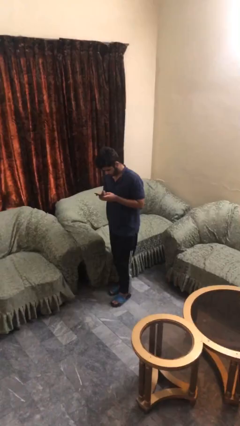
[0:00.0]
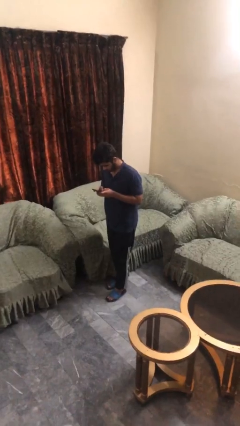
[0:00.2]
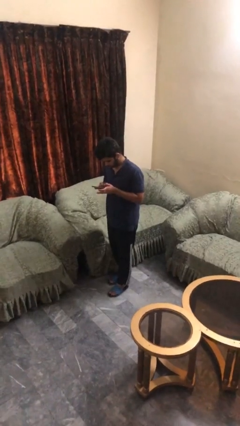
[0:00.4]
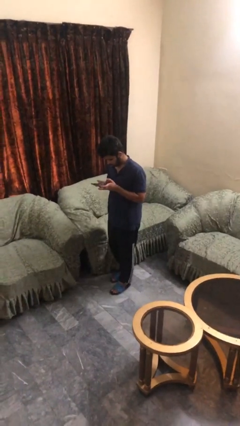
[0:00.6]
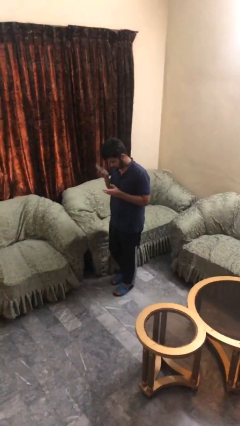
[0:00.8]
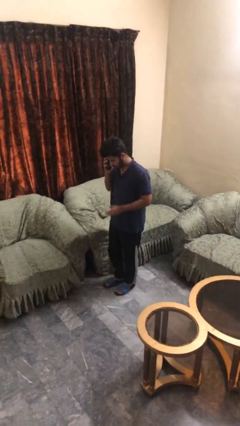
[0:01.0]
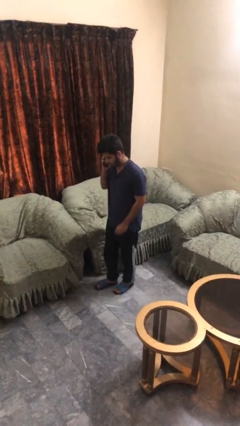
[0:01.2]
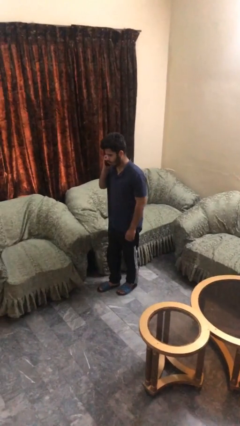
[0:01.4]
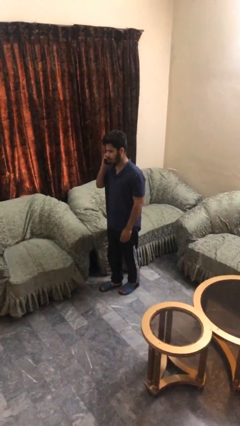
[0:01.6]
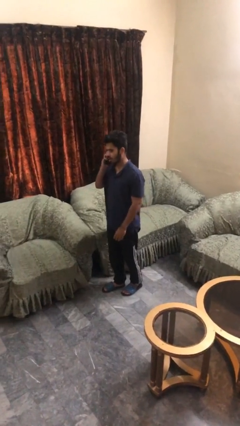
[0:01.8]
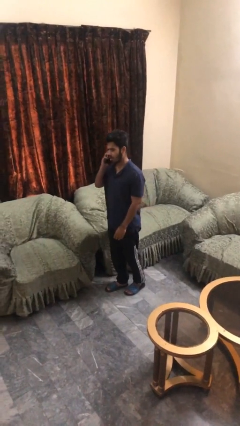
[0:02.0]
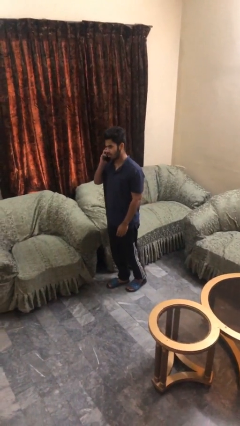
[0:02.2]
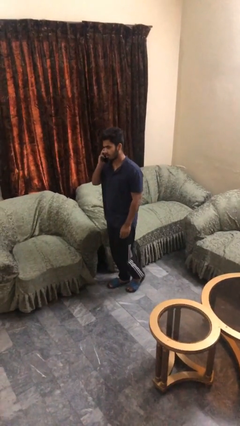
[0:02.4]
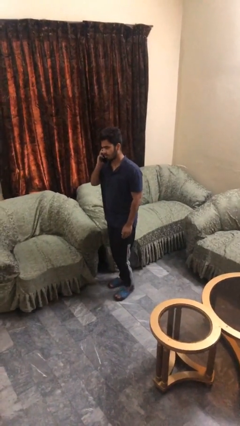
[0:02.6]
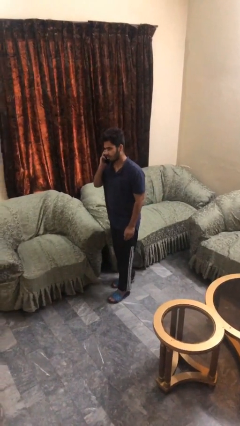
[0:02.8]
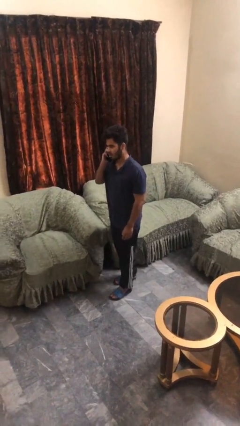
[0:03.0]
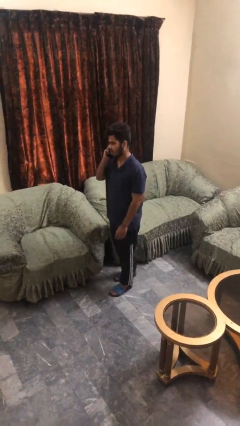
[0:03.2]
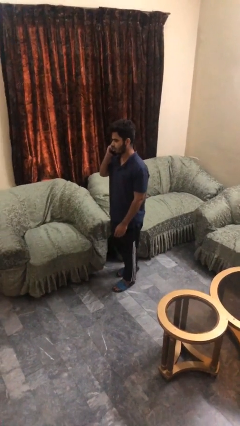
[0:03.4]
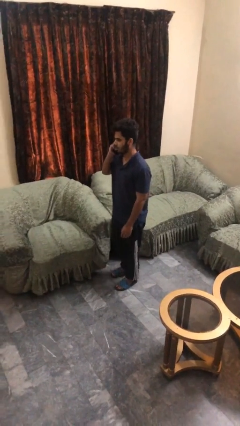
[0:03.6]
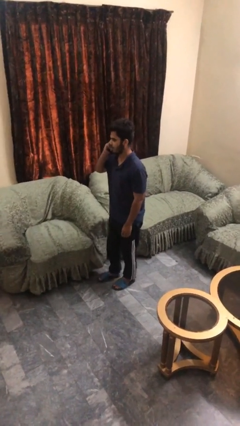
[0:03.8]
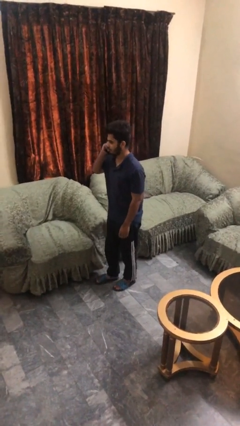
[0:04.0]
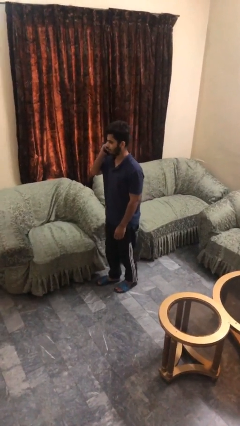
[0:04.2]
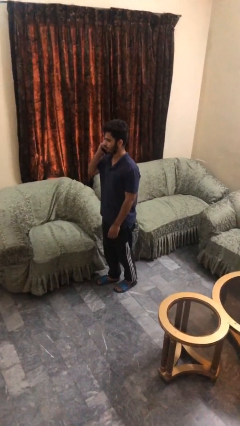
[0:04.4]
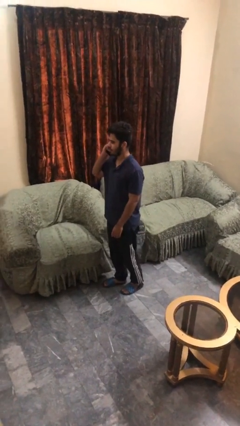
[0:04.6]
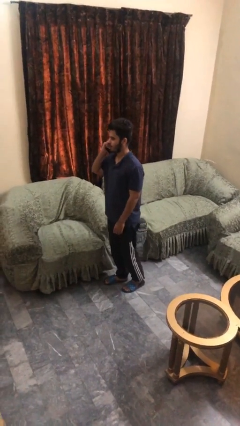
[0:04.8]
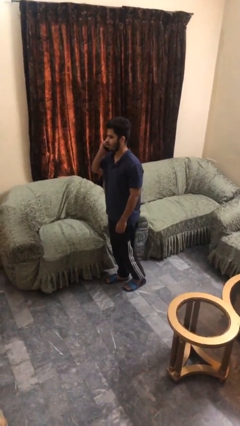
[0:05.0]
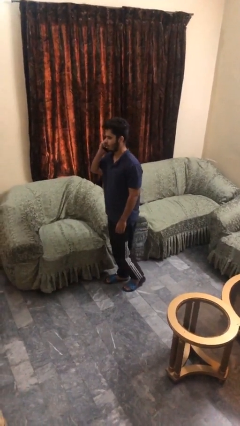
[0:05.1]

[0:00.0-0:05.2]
person talks on phone

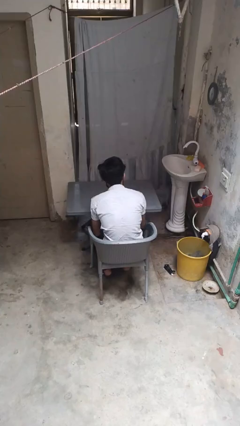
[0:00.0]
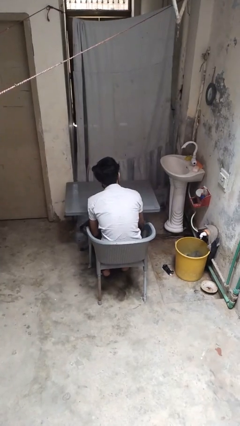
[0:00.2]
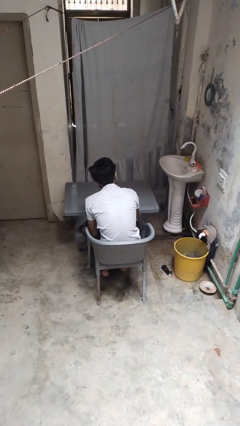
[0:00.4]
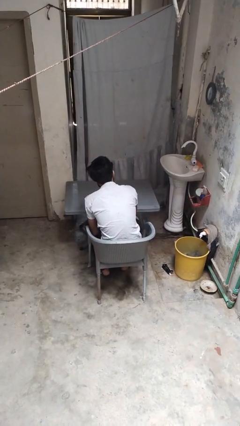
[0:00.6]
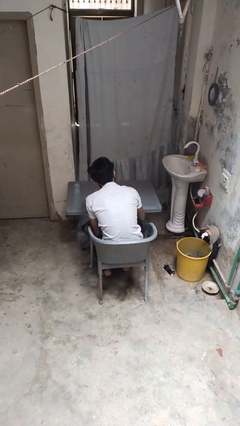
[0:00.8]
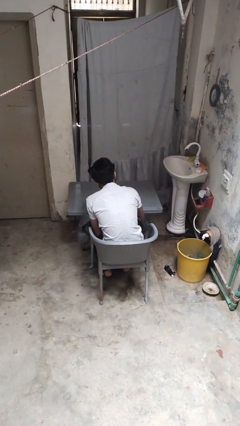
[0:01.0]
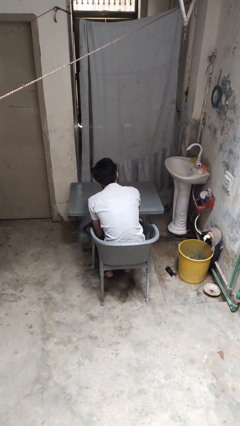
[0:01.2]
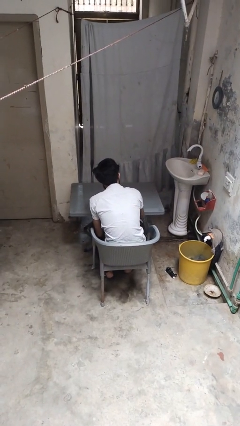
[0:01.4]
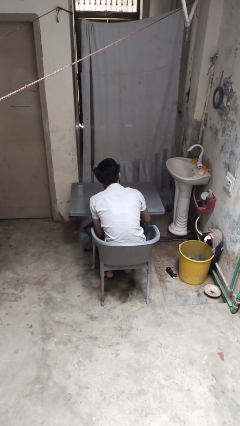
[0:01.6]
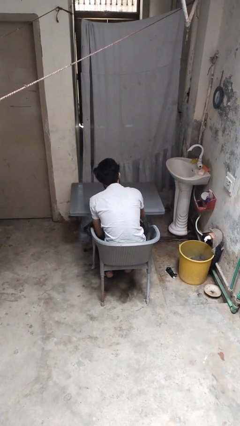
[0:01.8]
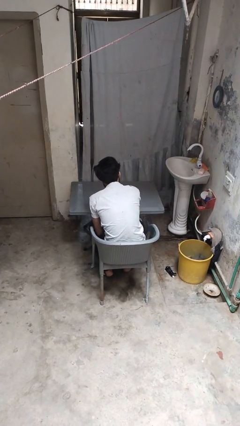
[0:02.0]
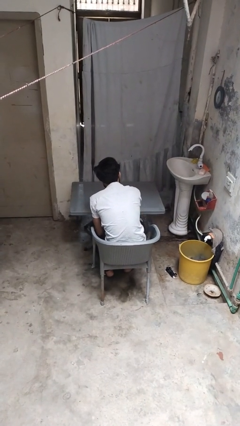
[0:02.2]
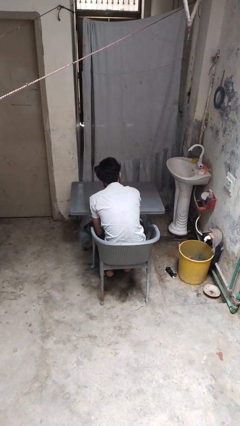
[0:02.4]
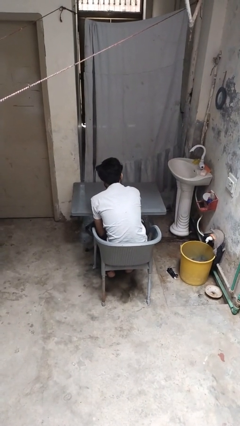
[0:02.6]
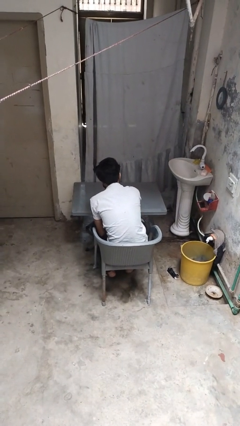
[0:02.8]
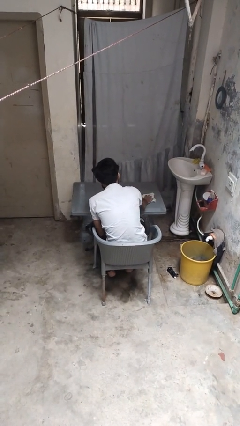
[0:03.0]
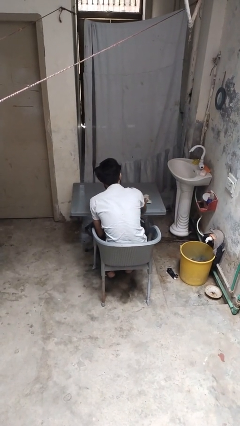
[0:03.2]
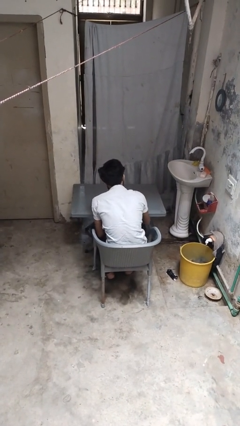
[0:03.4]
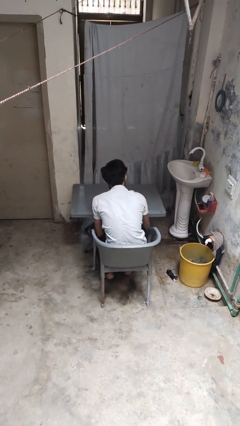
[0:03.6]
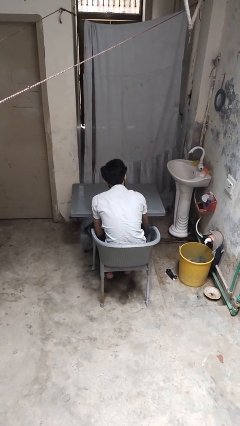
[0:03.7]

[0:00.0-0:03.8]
person cleans table with rag

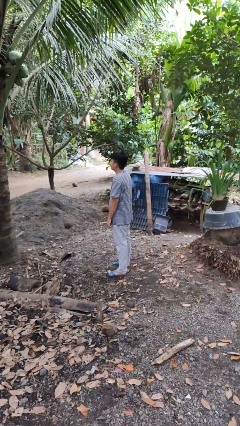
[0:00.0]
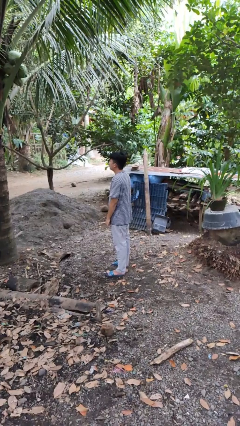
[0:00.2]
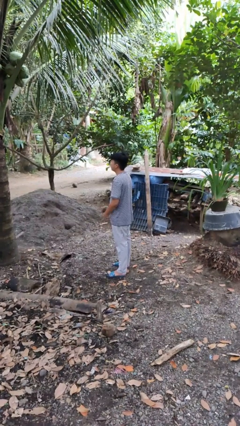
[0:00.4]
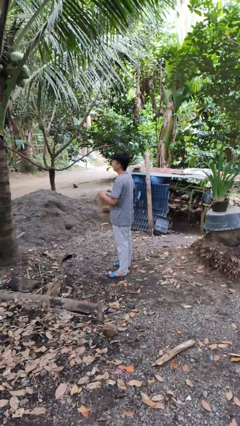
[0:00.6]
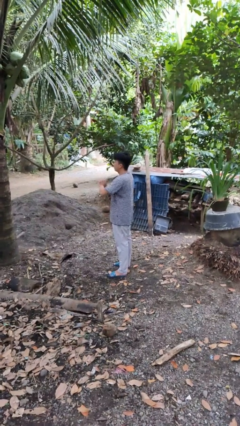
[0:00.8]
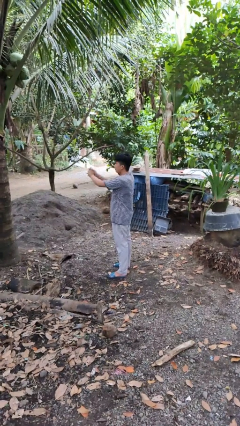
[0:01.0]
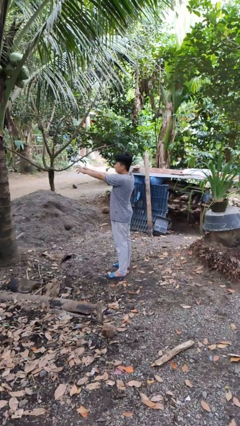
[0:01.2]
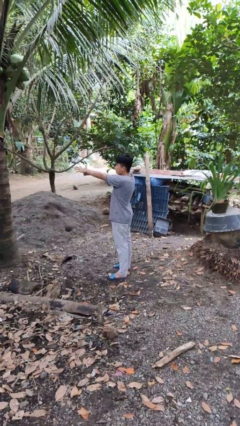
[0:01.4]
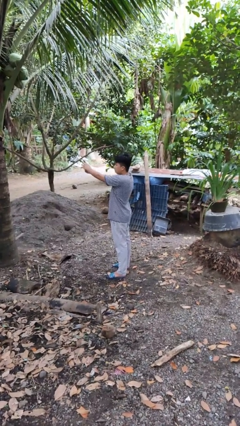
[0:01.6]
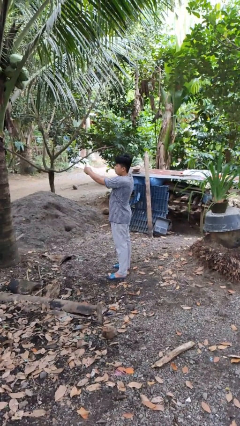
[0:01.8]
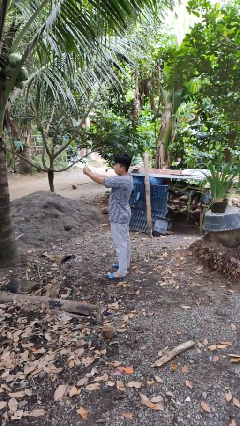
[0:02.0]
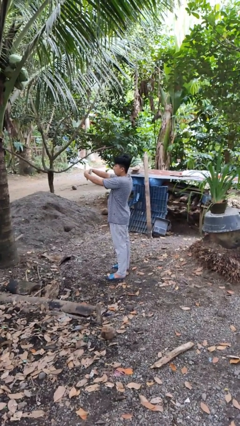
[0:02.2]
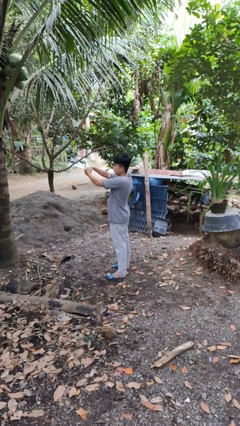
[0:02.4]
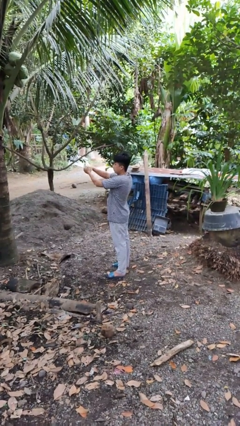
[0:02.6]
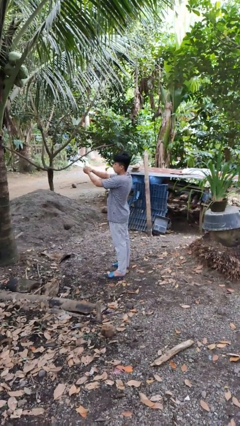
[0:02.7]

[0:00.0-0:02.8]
person cracks knuckles

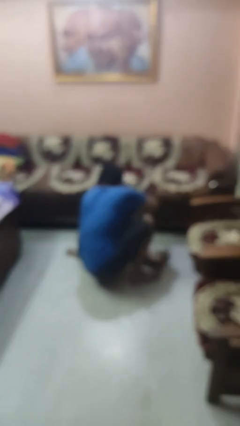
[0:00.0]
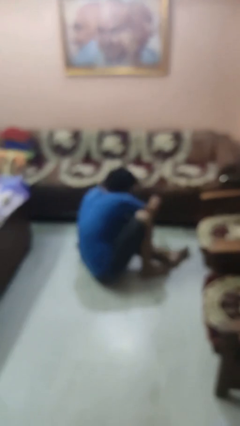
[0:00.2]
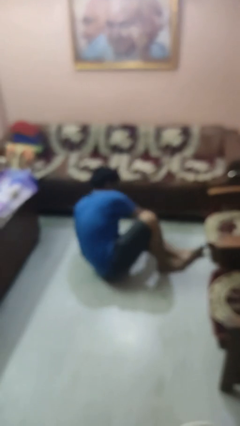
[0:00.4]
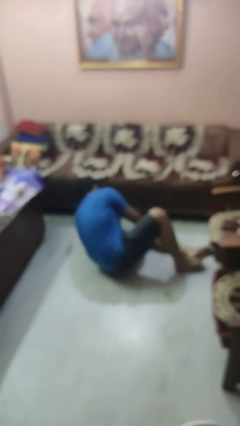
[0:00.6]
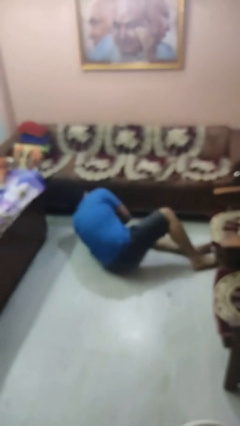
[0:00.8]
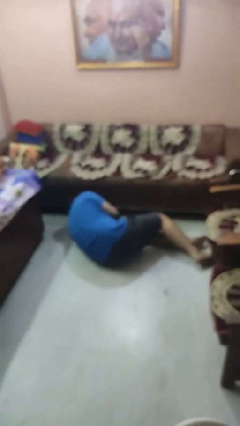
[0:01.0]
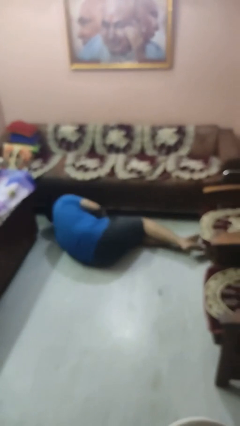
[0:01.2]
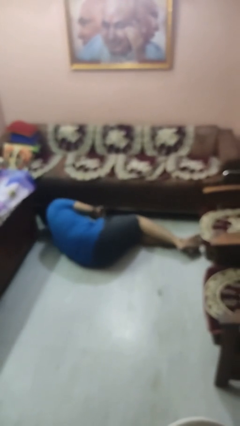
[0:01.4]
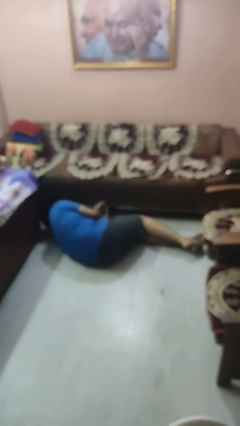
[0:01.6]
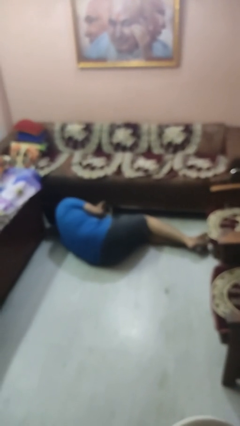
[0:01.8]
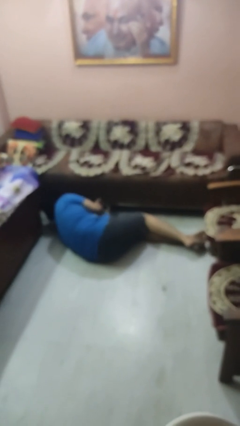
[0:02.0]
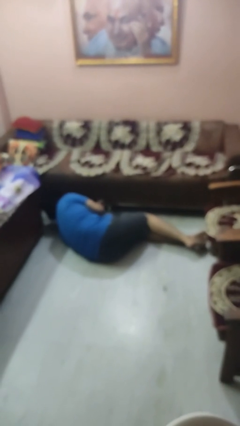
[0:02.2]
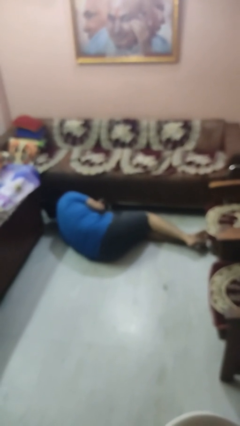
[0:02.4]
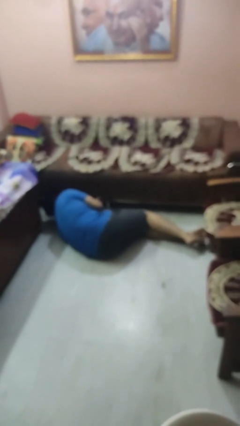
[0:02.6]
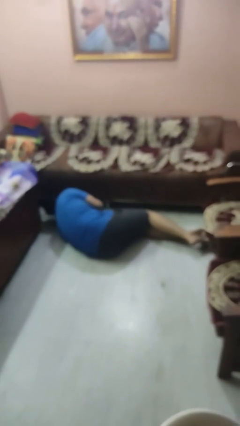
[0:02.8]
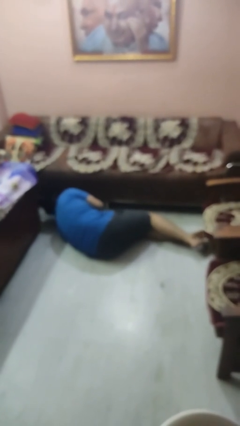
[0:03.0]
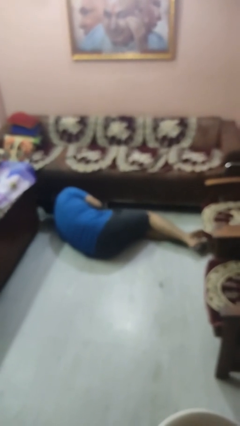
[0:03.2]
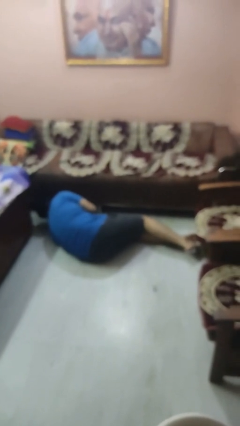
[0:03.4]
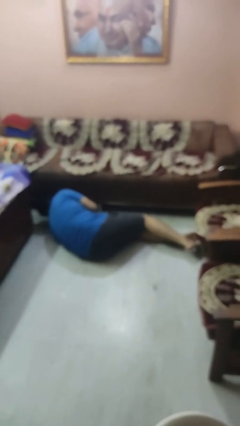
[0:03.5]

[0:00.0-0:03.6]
person lies down on floor

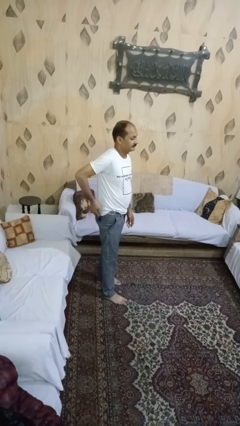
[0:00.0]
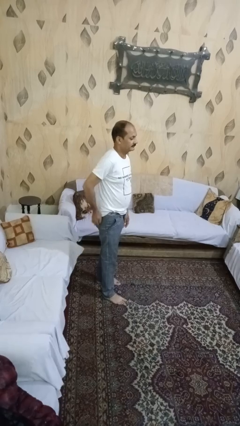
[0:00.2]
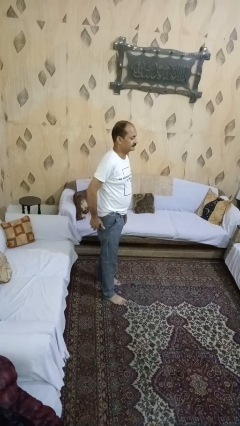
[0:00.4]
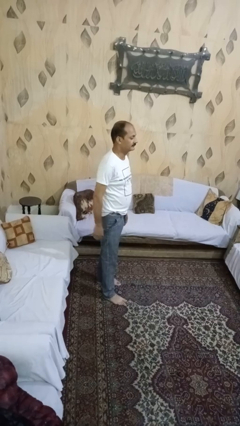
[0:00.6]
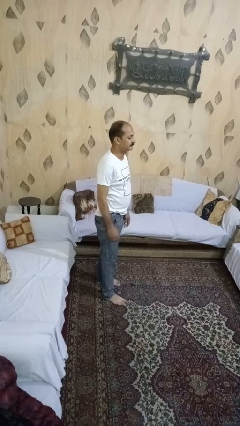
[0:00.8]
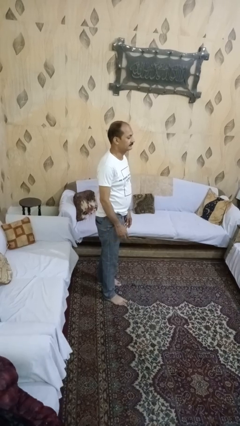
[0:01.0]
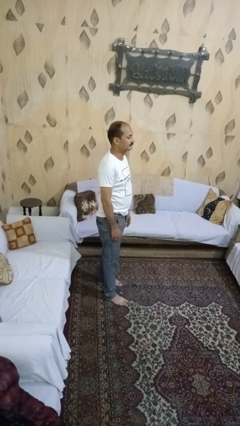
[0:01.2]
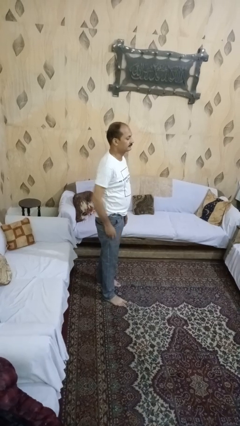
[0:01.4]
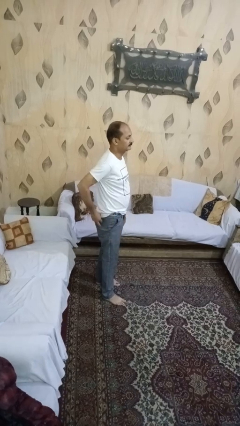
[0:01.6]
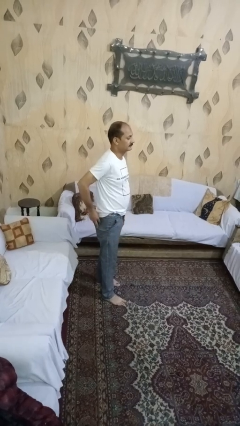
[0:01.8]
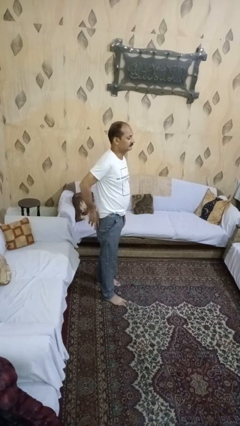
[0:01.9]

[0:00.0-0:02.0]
person puts phone into pocket
